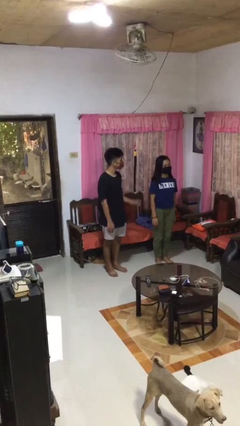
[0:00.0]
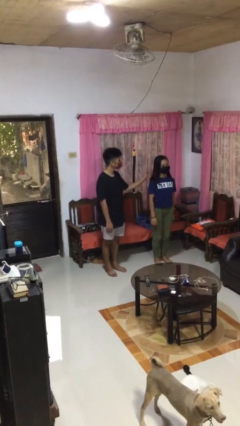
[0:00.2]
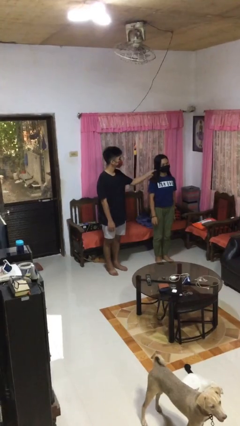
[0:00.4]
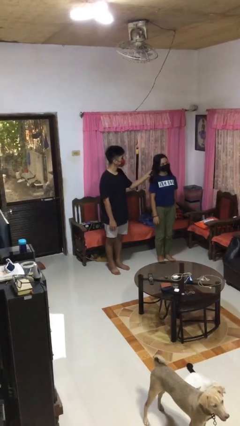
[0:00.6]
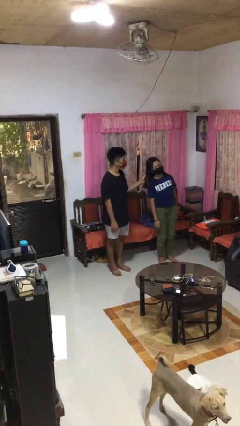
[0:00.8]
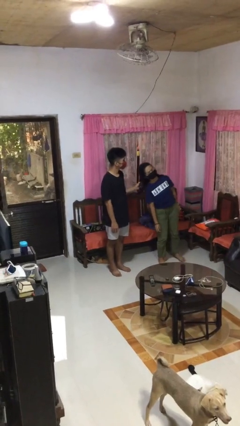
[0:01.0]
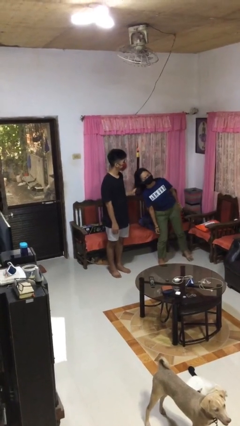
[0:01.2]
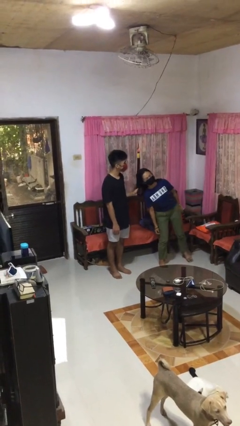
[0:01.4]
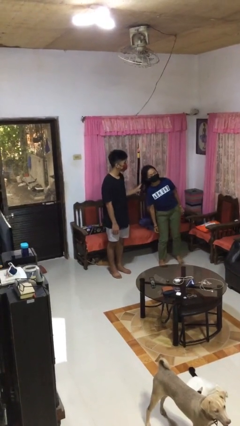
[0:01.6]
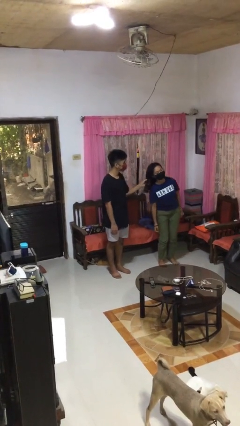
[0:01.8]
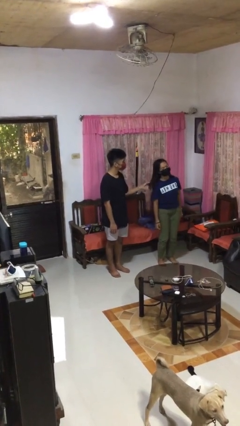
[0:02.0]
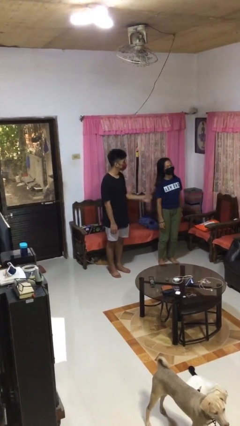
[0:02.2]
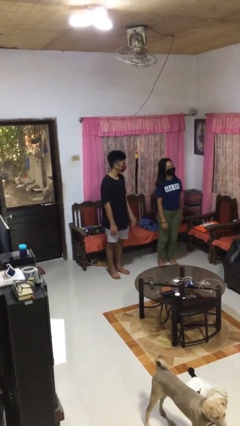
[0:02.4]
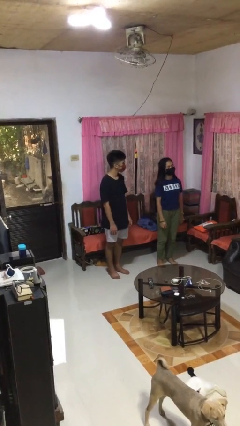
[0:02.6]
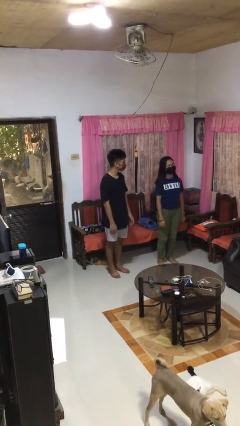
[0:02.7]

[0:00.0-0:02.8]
person grabs person by hair

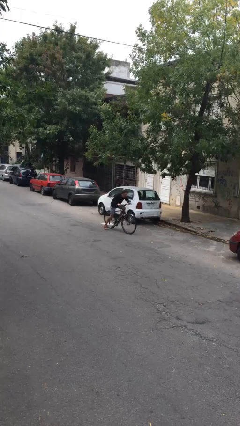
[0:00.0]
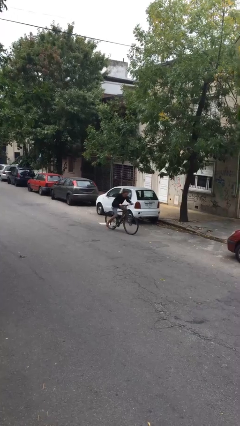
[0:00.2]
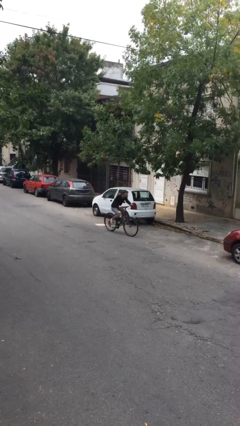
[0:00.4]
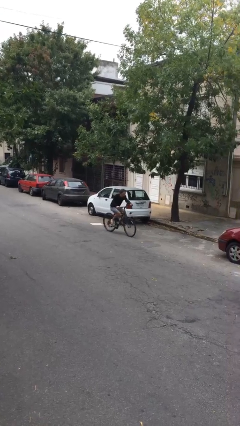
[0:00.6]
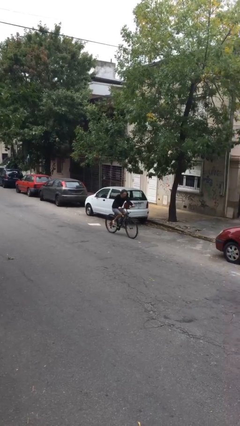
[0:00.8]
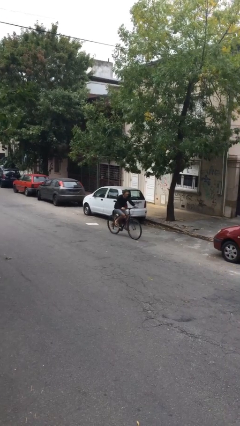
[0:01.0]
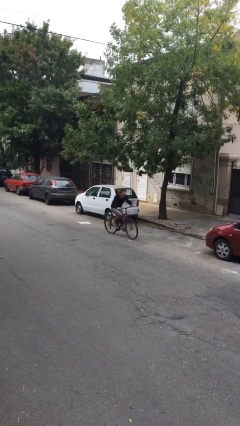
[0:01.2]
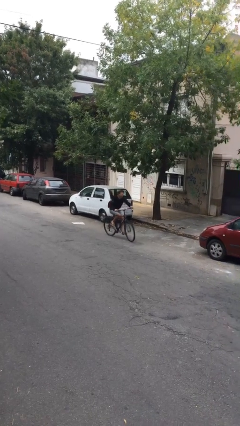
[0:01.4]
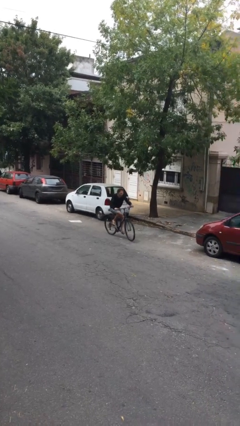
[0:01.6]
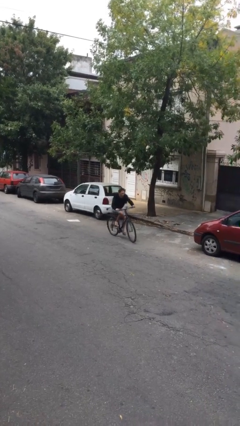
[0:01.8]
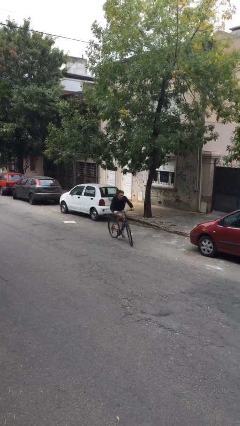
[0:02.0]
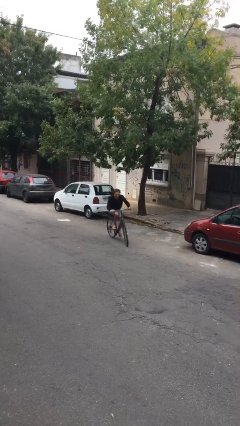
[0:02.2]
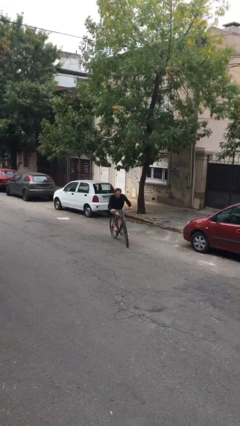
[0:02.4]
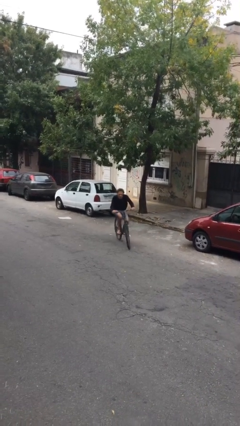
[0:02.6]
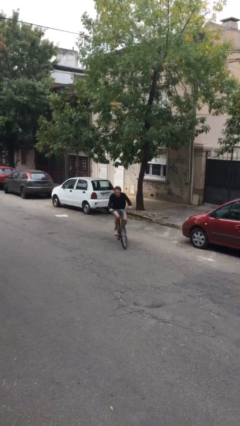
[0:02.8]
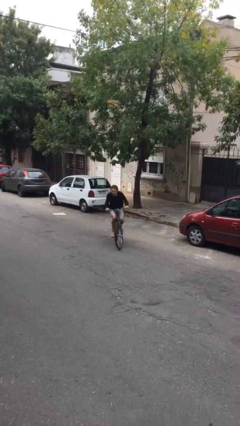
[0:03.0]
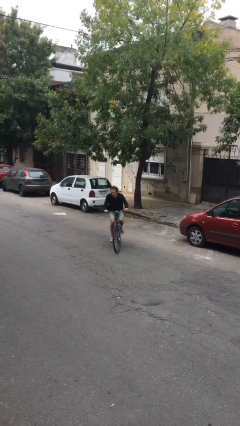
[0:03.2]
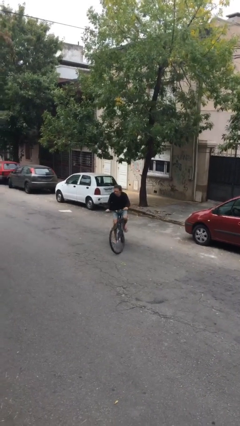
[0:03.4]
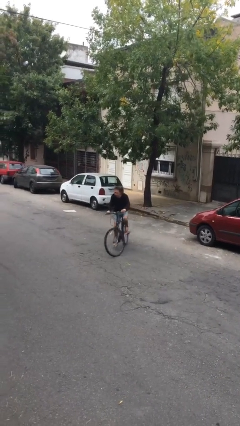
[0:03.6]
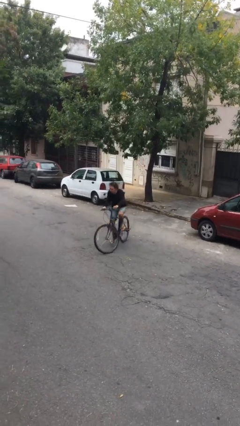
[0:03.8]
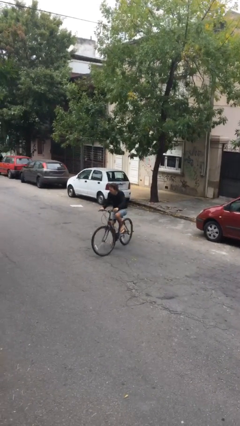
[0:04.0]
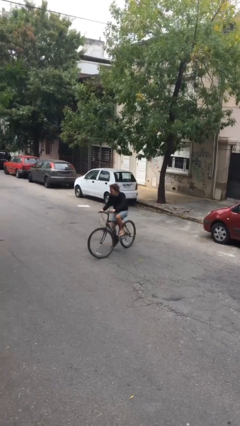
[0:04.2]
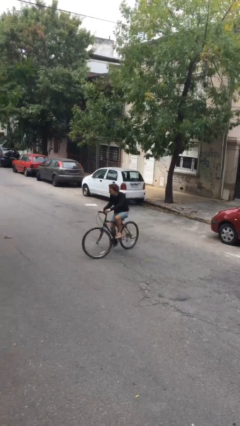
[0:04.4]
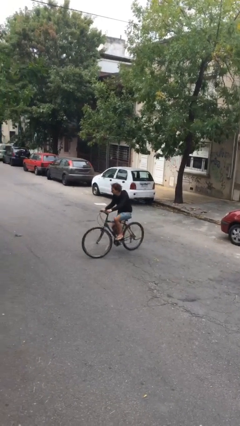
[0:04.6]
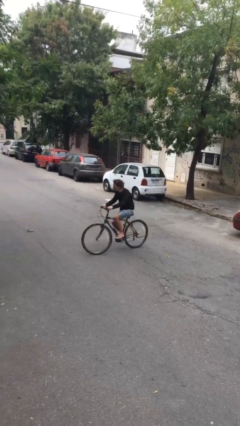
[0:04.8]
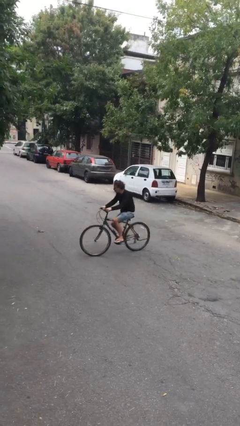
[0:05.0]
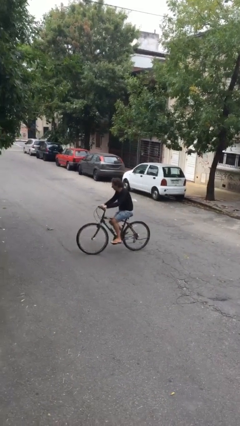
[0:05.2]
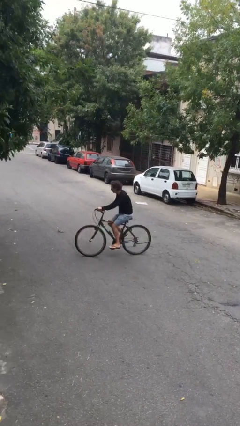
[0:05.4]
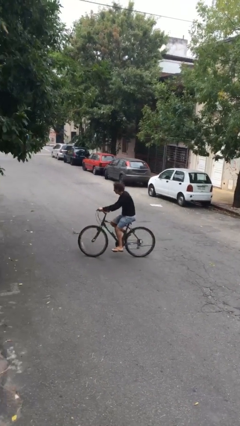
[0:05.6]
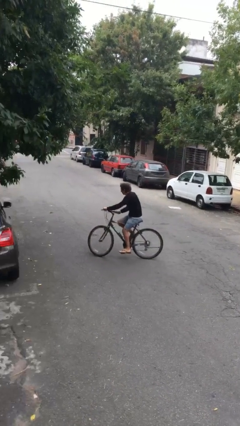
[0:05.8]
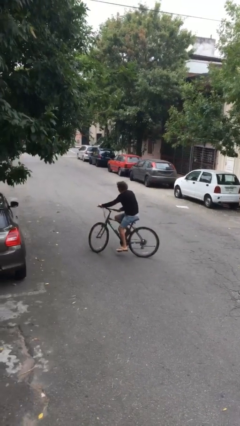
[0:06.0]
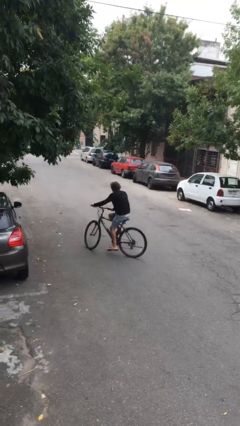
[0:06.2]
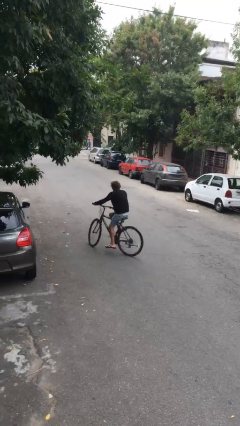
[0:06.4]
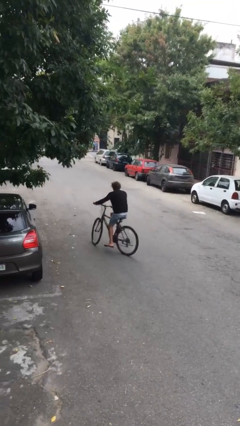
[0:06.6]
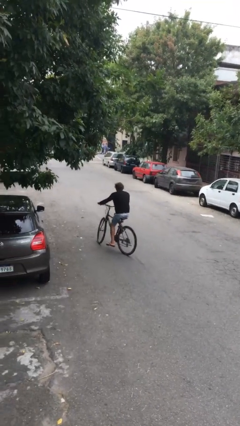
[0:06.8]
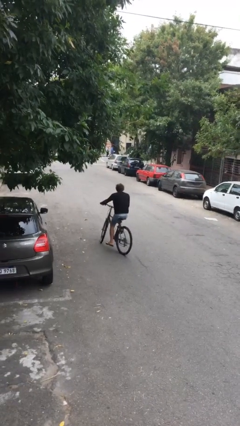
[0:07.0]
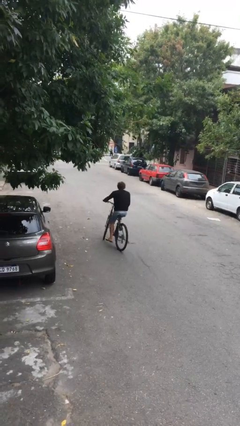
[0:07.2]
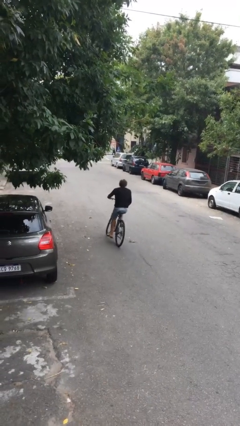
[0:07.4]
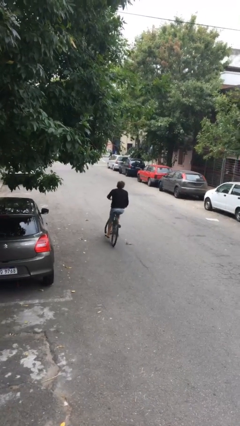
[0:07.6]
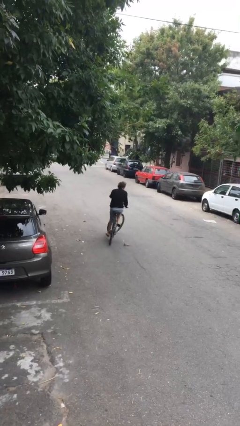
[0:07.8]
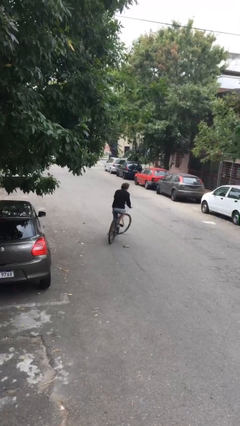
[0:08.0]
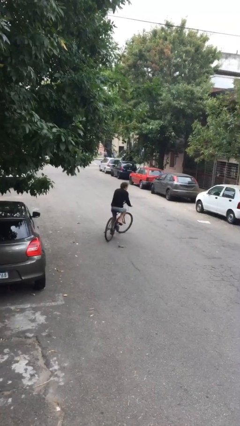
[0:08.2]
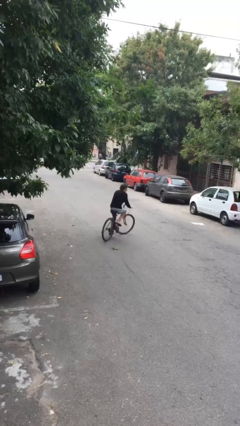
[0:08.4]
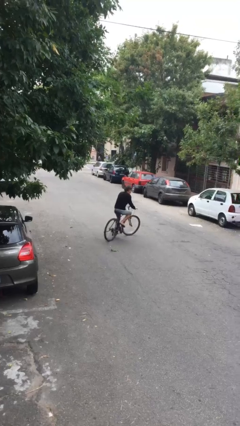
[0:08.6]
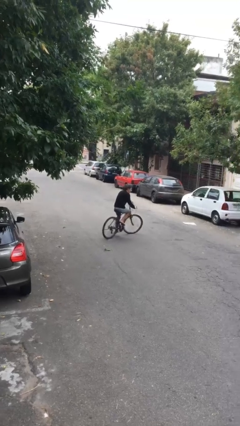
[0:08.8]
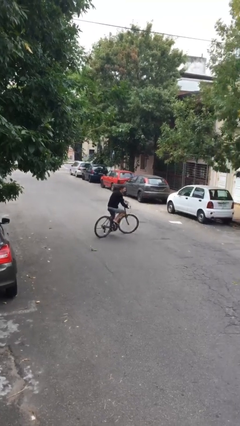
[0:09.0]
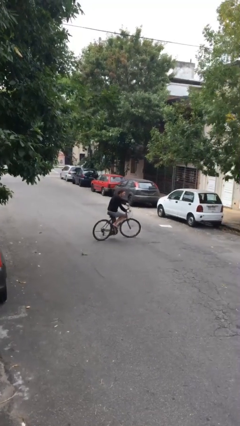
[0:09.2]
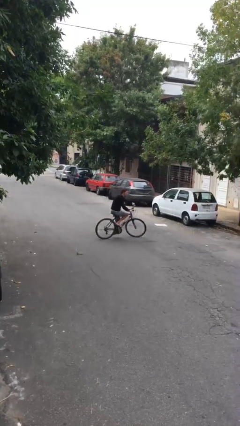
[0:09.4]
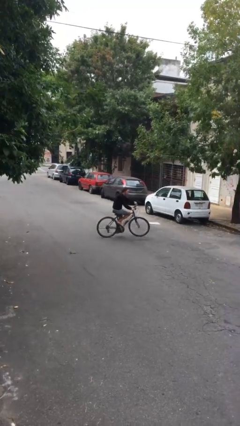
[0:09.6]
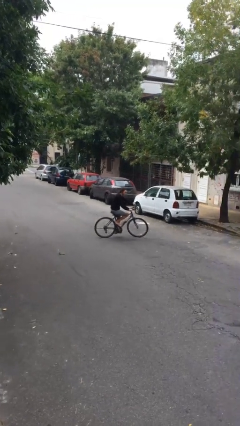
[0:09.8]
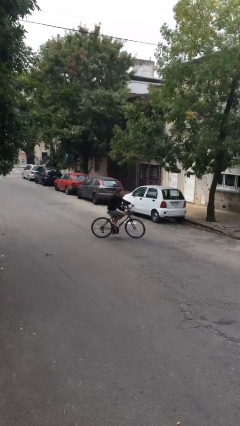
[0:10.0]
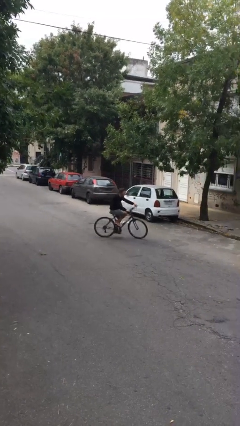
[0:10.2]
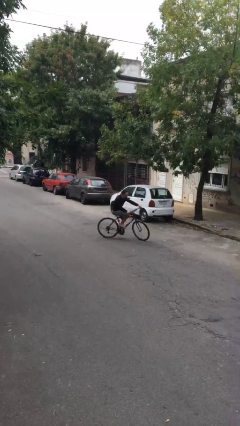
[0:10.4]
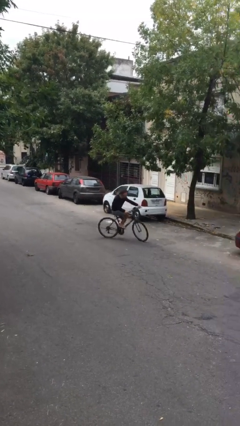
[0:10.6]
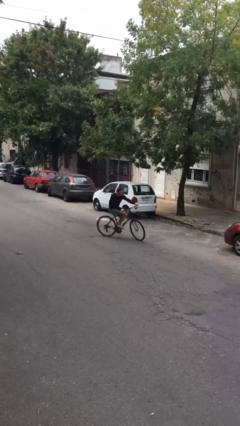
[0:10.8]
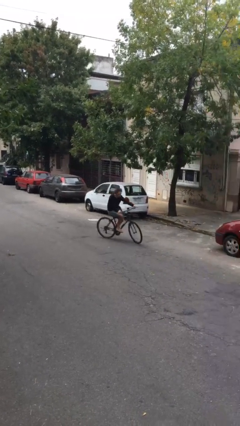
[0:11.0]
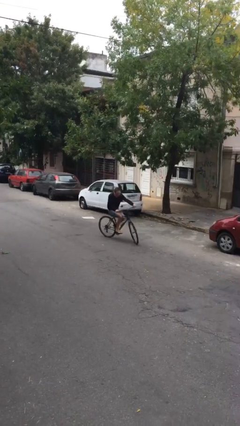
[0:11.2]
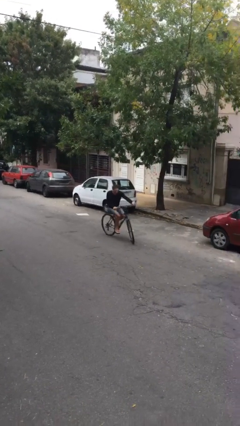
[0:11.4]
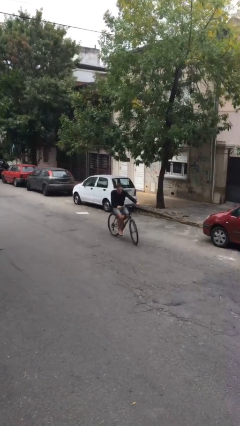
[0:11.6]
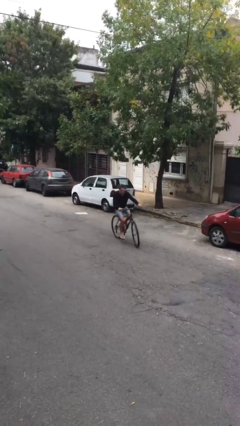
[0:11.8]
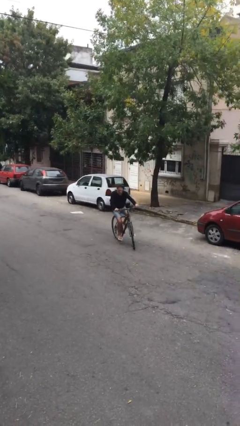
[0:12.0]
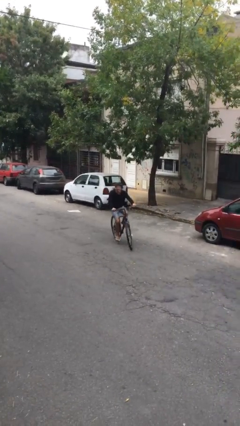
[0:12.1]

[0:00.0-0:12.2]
person rides bicycle

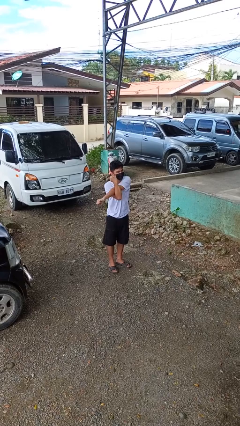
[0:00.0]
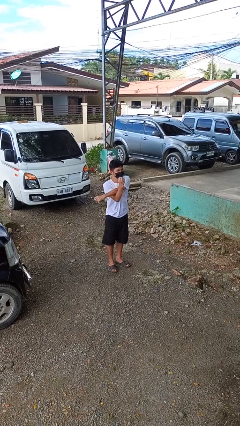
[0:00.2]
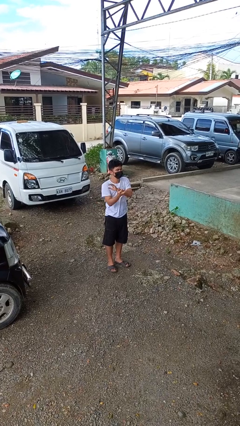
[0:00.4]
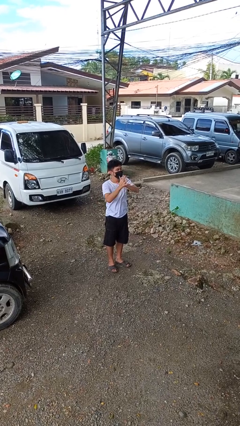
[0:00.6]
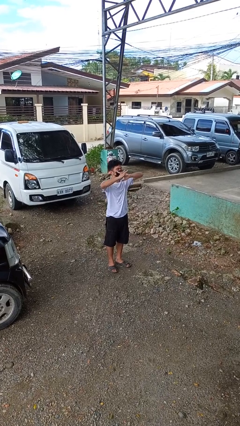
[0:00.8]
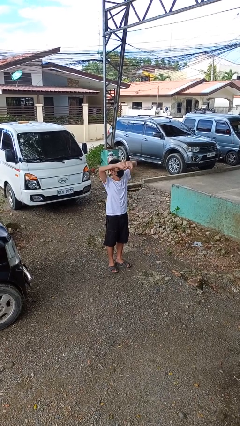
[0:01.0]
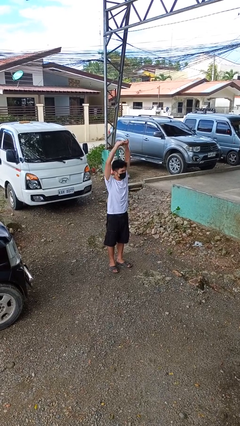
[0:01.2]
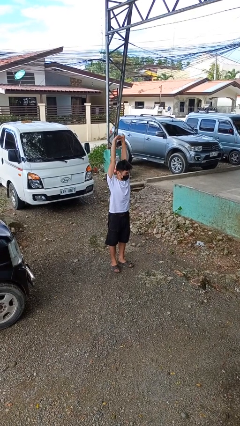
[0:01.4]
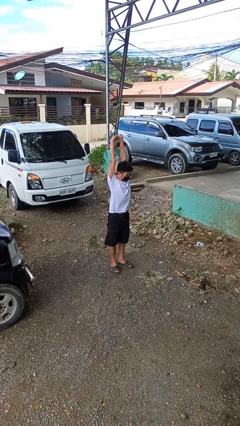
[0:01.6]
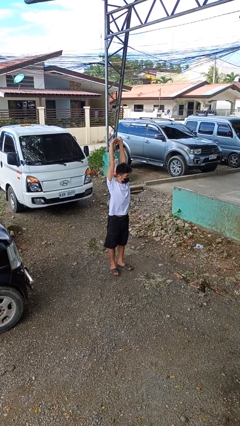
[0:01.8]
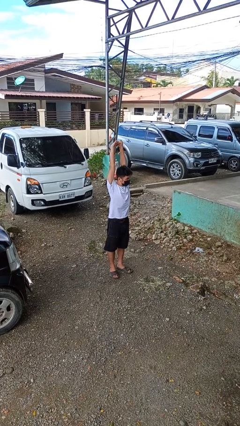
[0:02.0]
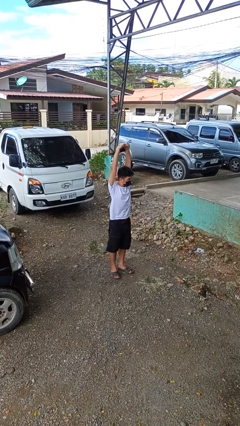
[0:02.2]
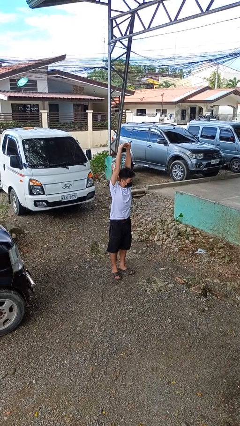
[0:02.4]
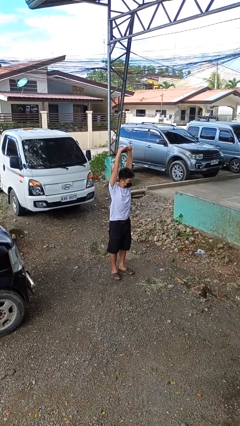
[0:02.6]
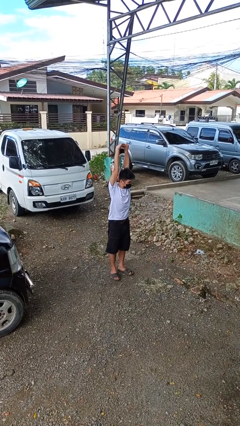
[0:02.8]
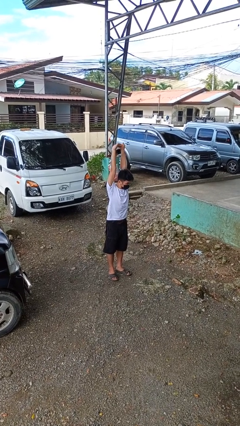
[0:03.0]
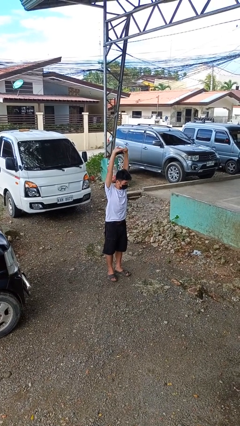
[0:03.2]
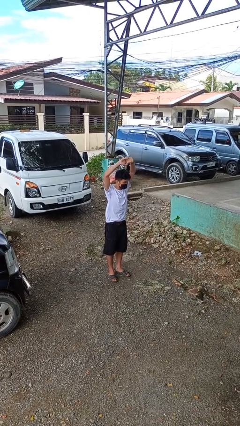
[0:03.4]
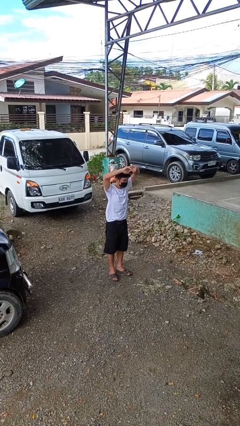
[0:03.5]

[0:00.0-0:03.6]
person stretches arms over head
